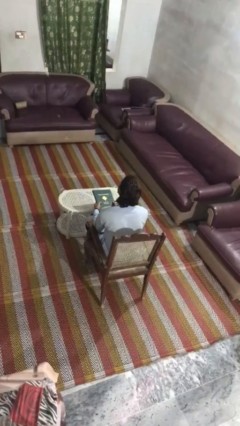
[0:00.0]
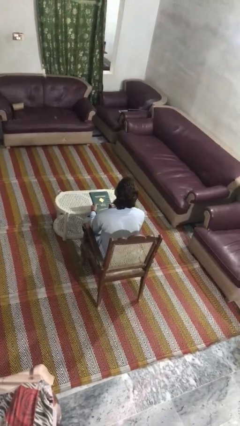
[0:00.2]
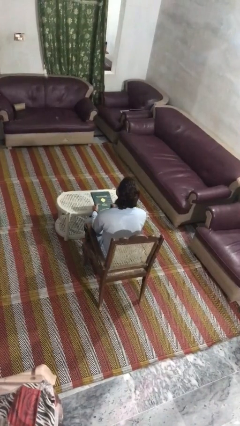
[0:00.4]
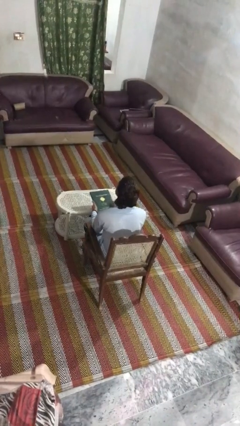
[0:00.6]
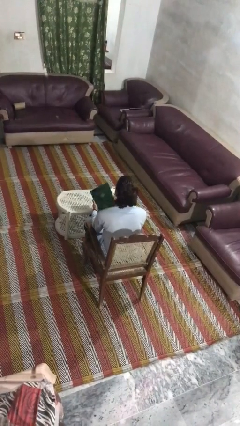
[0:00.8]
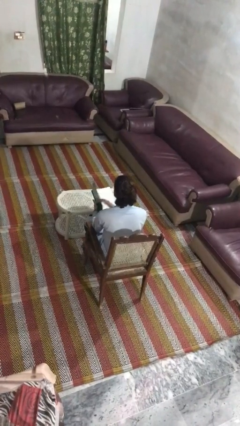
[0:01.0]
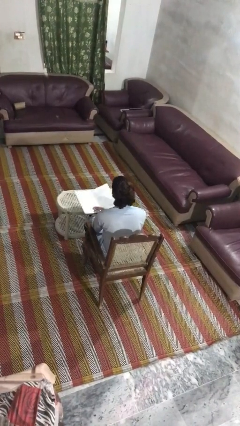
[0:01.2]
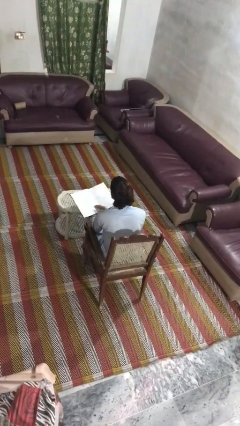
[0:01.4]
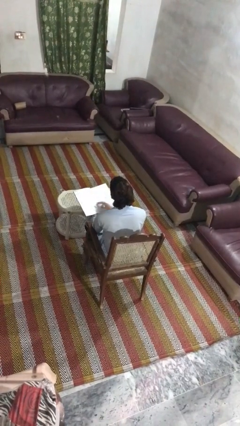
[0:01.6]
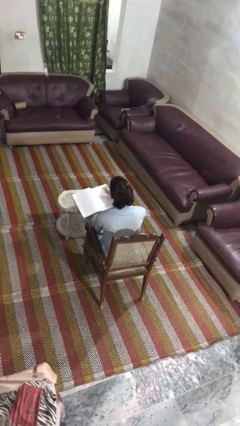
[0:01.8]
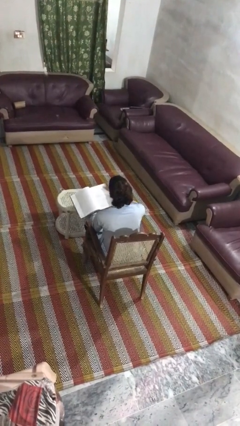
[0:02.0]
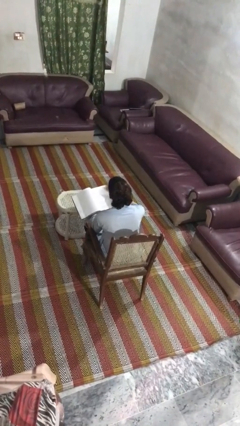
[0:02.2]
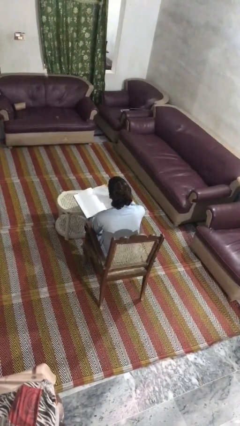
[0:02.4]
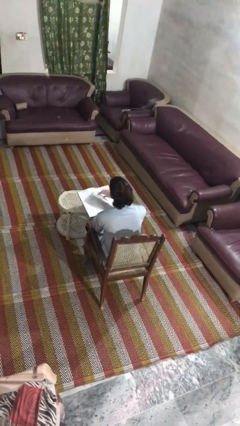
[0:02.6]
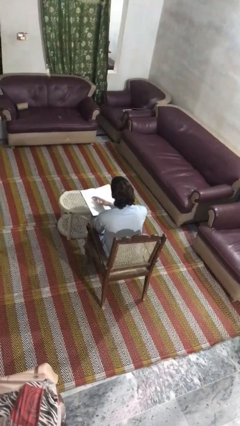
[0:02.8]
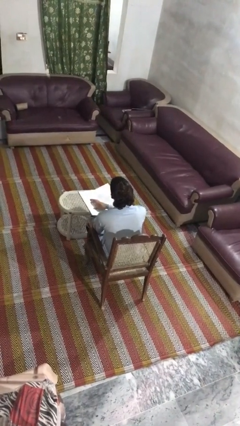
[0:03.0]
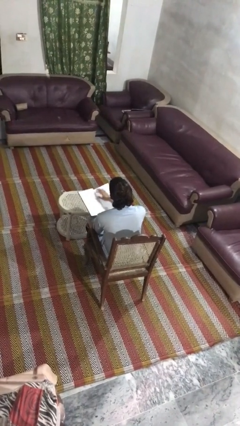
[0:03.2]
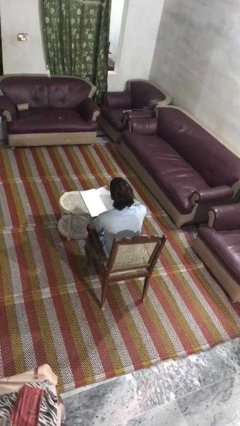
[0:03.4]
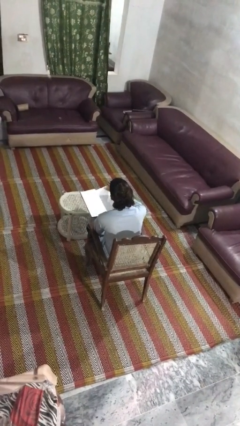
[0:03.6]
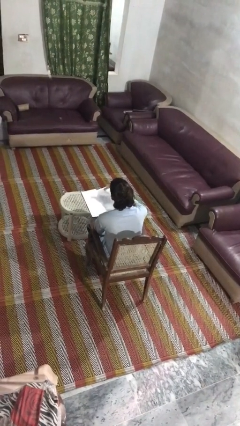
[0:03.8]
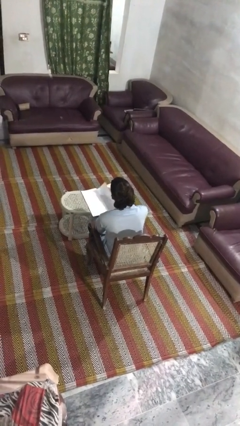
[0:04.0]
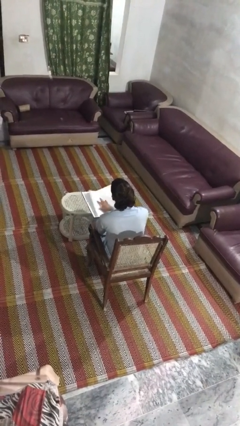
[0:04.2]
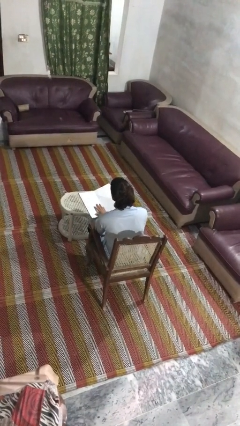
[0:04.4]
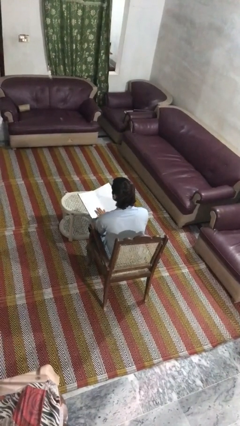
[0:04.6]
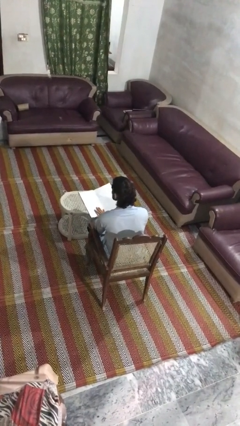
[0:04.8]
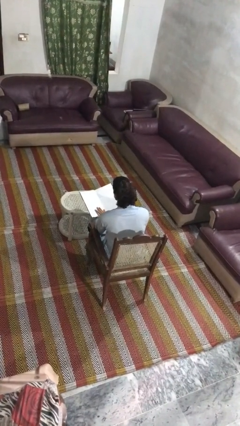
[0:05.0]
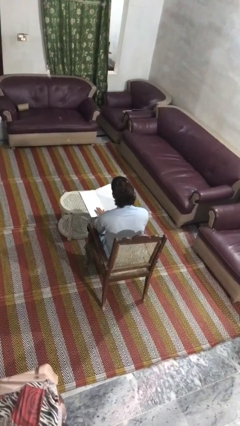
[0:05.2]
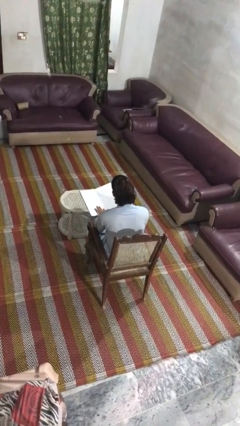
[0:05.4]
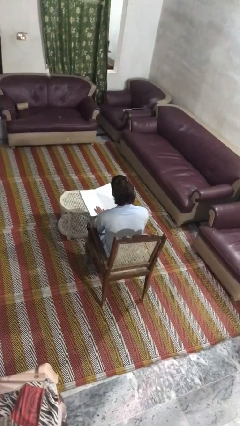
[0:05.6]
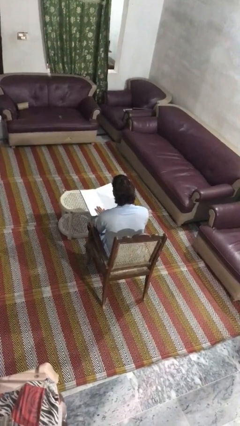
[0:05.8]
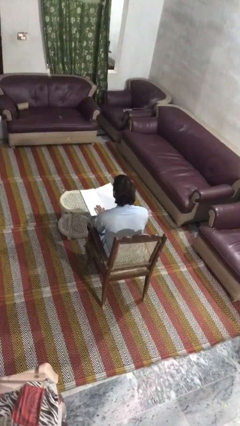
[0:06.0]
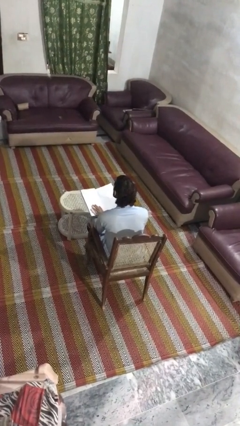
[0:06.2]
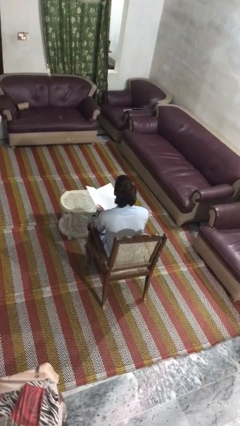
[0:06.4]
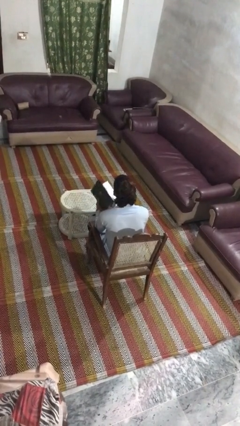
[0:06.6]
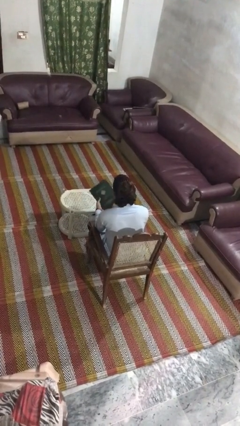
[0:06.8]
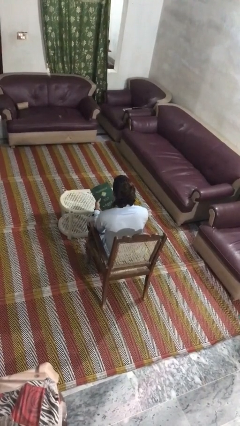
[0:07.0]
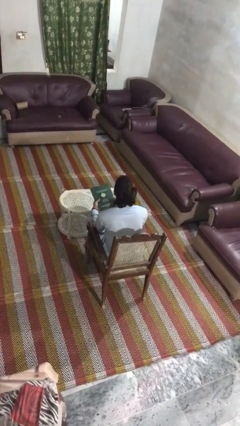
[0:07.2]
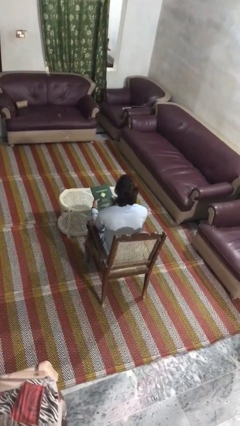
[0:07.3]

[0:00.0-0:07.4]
person reads book

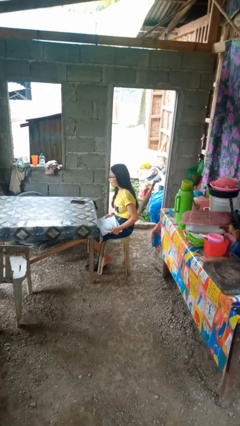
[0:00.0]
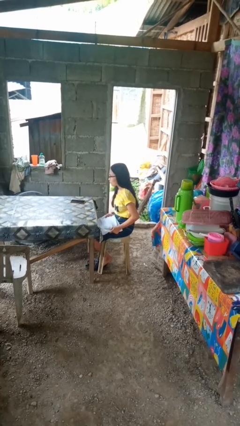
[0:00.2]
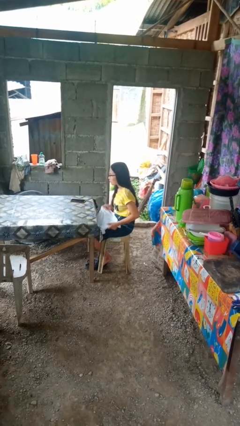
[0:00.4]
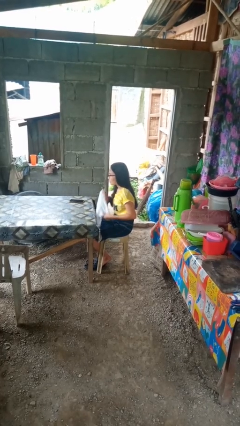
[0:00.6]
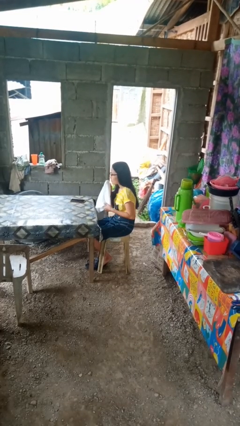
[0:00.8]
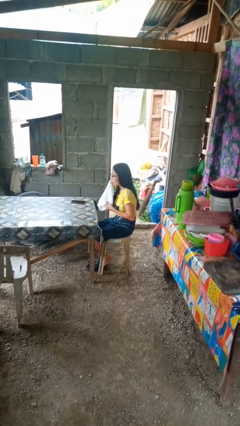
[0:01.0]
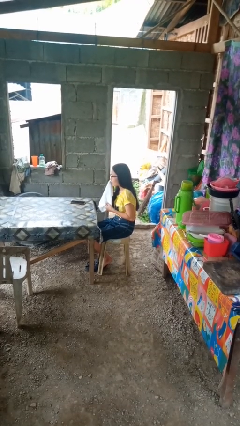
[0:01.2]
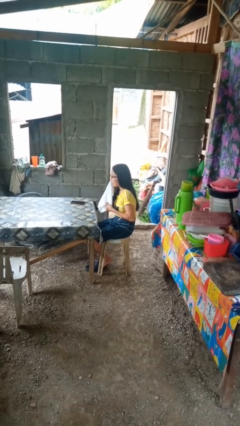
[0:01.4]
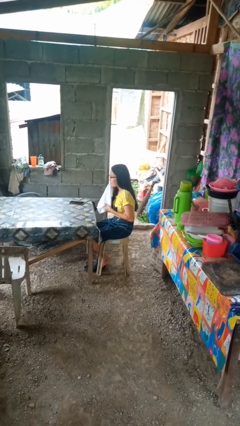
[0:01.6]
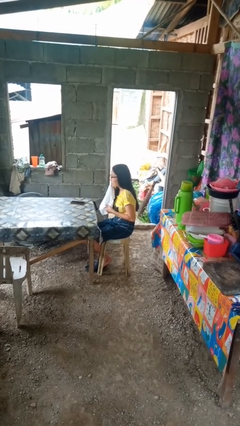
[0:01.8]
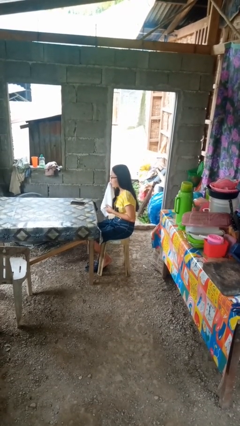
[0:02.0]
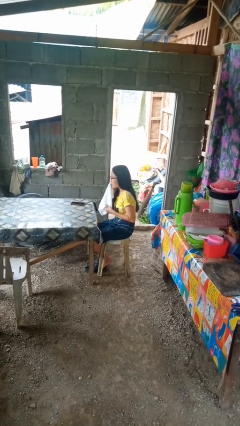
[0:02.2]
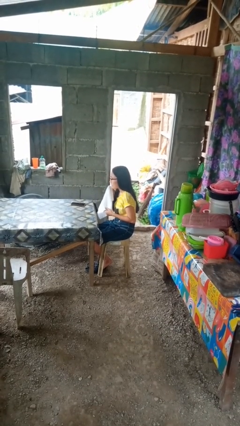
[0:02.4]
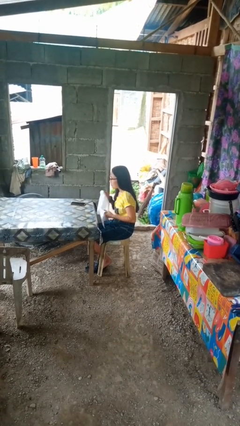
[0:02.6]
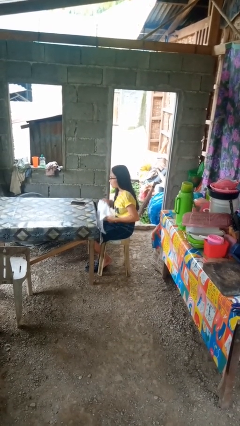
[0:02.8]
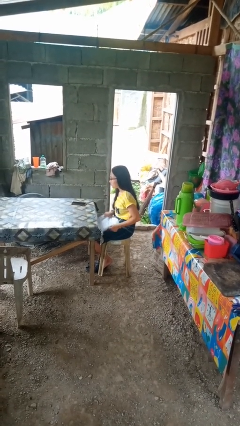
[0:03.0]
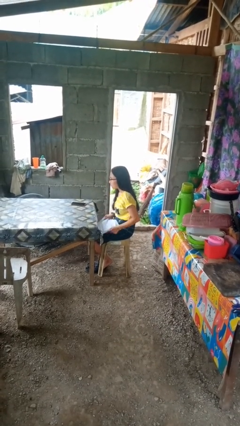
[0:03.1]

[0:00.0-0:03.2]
person wipes mouth with napkin

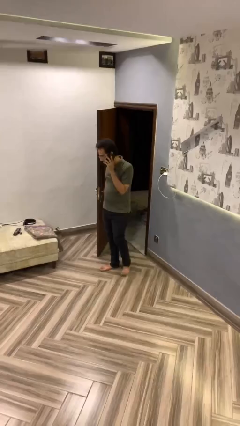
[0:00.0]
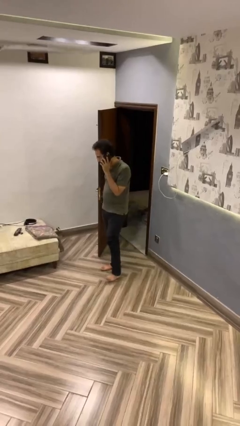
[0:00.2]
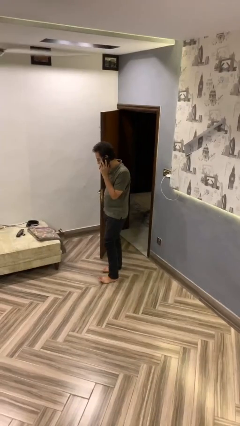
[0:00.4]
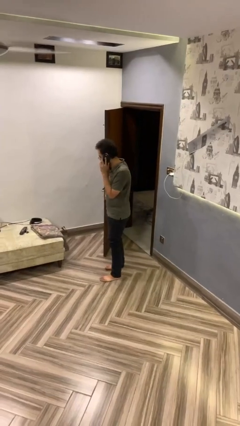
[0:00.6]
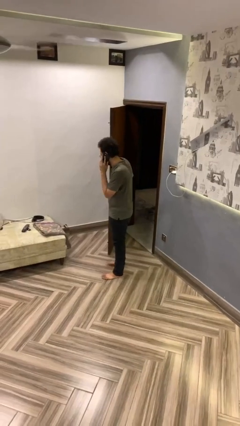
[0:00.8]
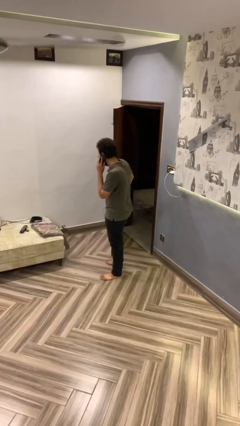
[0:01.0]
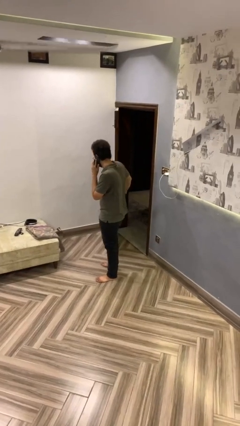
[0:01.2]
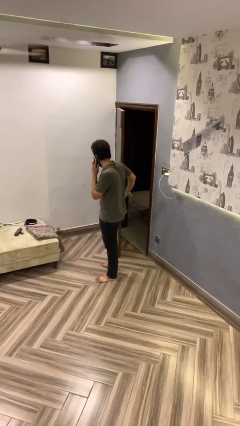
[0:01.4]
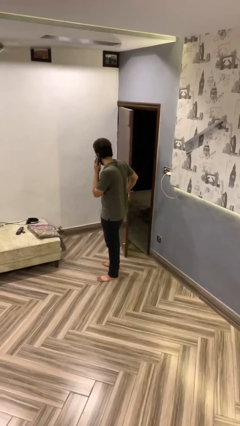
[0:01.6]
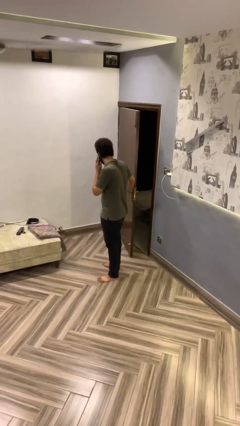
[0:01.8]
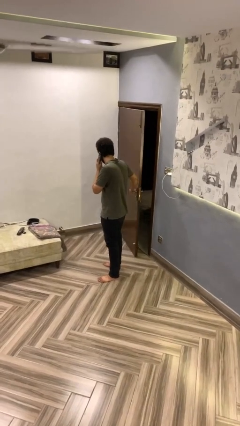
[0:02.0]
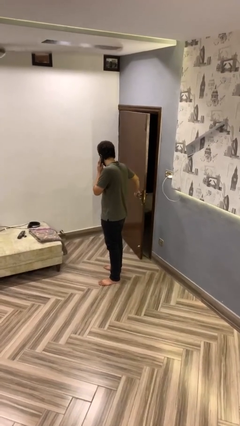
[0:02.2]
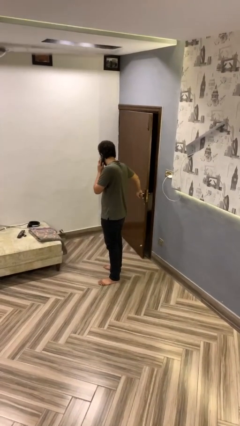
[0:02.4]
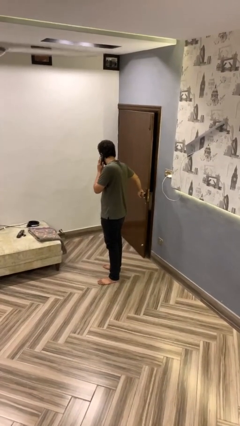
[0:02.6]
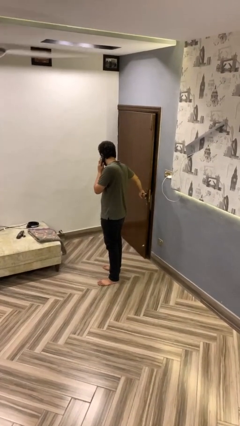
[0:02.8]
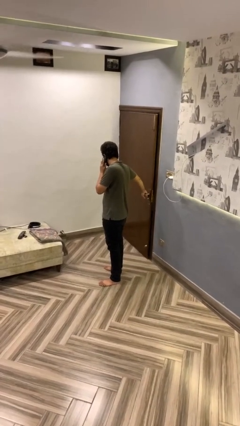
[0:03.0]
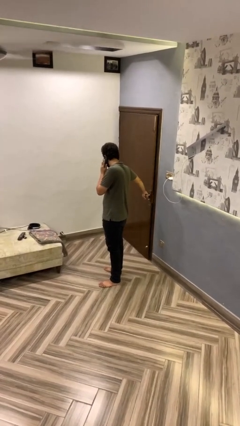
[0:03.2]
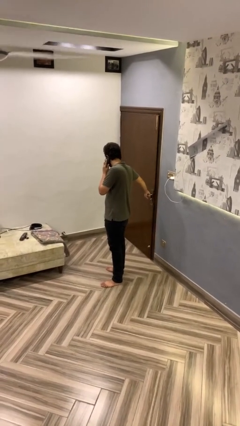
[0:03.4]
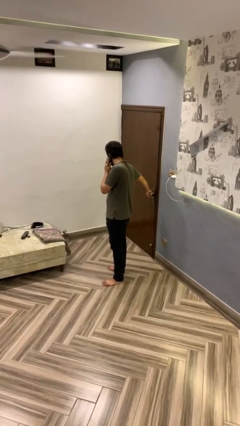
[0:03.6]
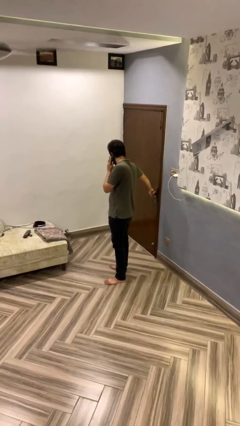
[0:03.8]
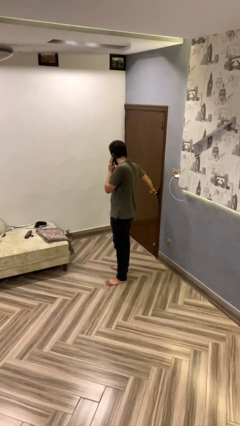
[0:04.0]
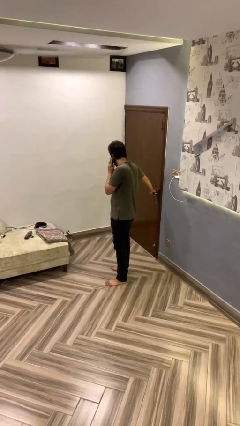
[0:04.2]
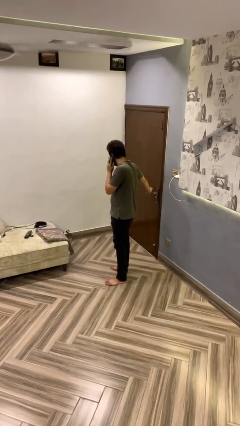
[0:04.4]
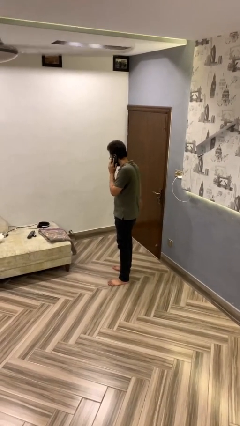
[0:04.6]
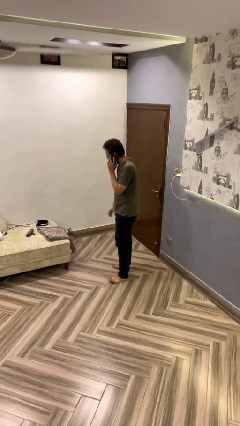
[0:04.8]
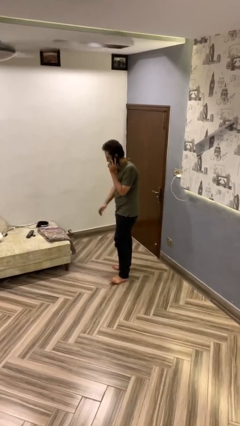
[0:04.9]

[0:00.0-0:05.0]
person closes facility door

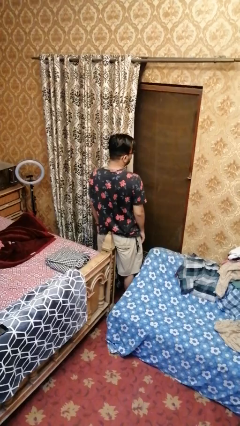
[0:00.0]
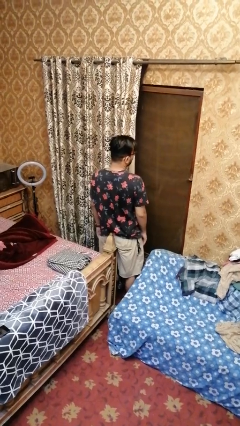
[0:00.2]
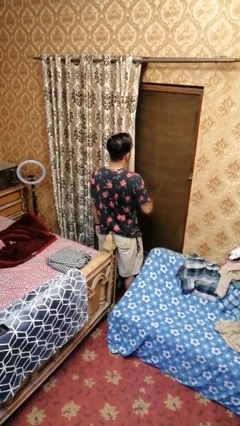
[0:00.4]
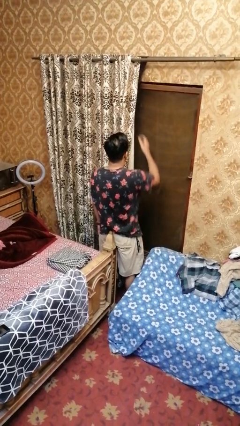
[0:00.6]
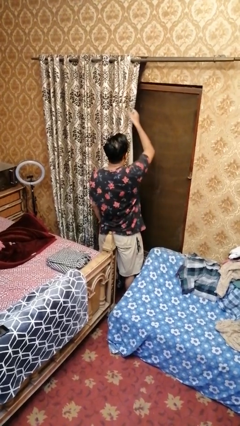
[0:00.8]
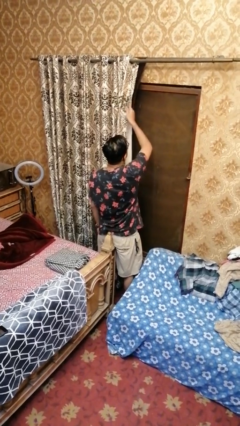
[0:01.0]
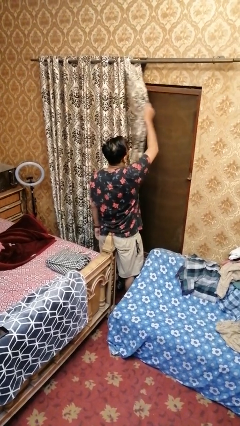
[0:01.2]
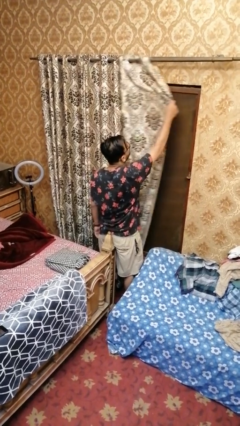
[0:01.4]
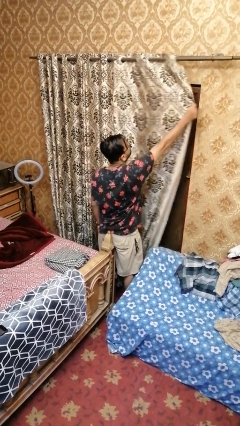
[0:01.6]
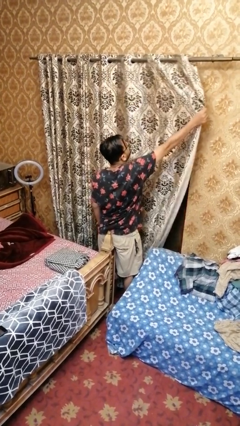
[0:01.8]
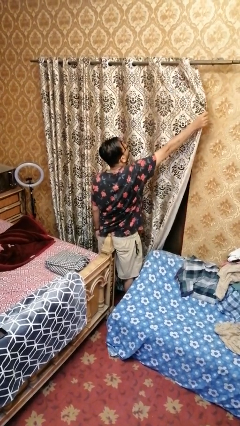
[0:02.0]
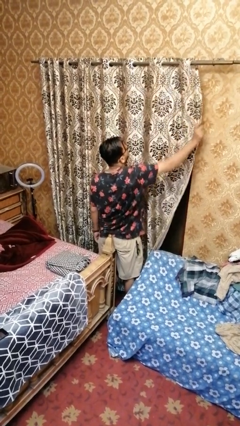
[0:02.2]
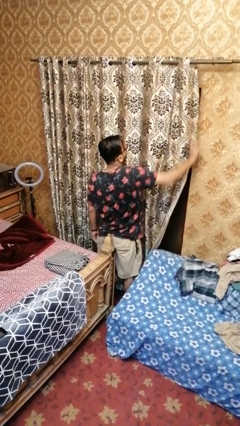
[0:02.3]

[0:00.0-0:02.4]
person closes curtains
